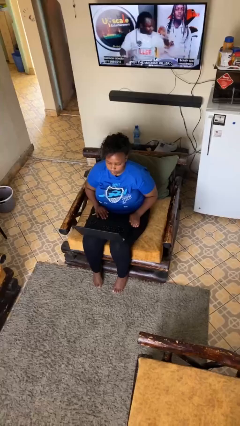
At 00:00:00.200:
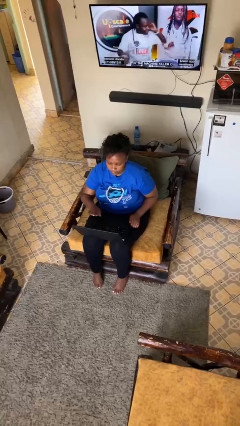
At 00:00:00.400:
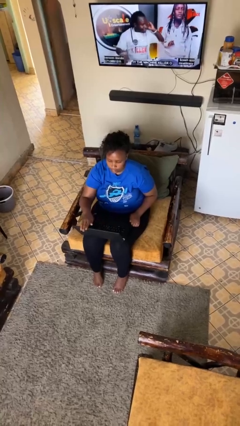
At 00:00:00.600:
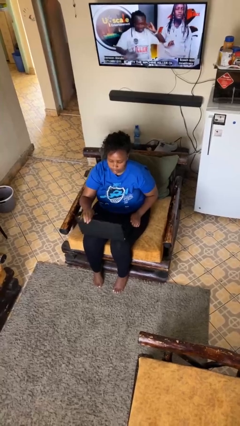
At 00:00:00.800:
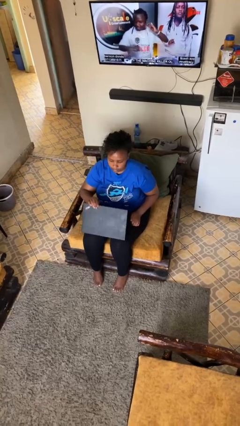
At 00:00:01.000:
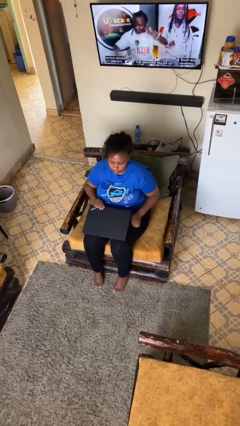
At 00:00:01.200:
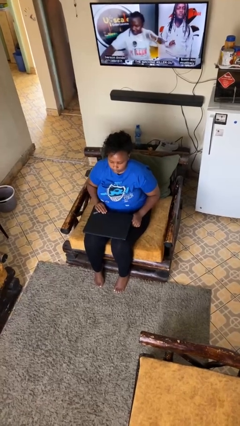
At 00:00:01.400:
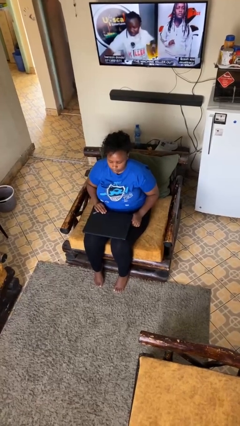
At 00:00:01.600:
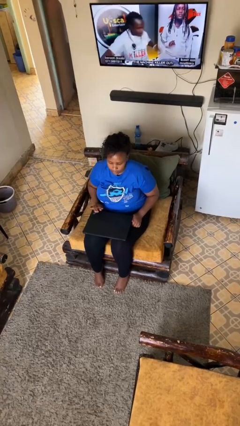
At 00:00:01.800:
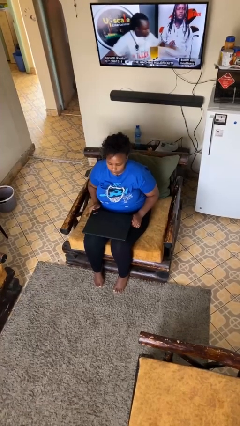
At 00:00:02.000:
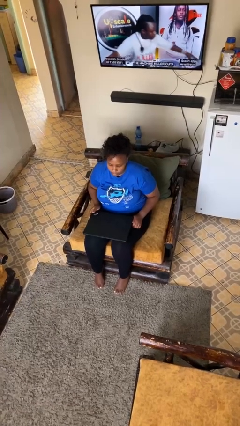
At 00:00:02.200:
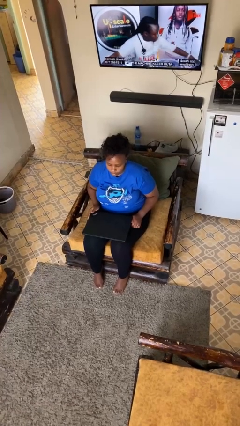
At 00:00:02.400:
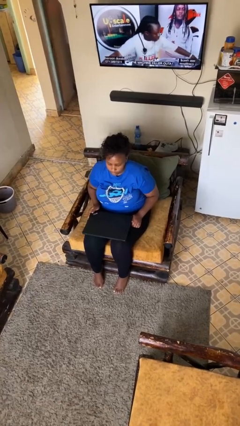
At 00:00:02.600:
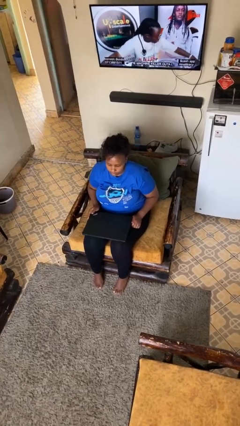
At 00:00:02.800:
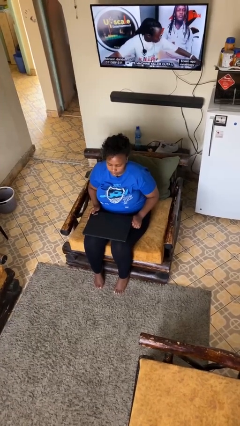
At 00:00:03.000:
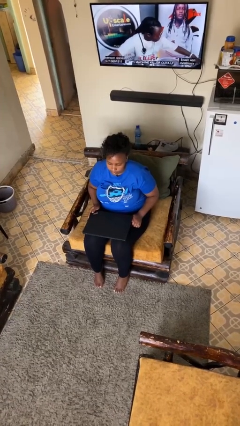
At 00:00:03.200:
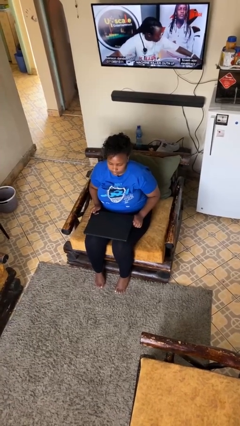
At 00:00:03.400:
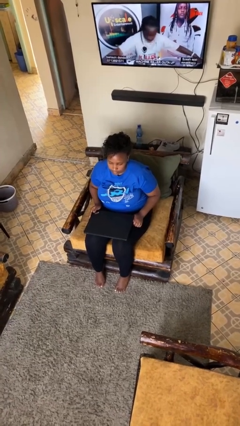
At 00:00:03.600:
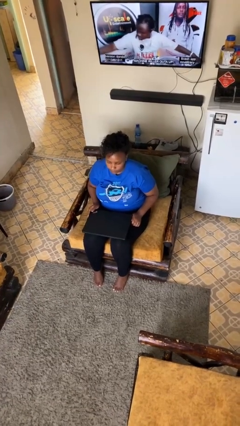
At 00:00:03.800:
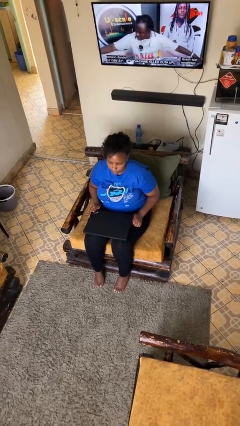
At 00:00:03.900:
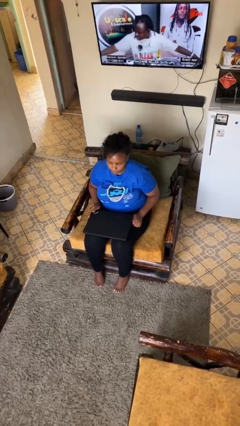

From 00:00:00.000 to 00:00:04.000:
person closes laptop

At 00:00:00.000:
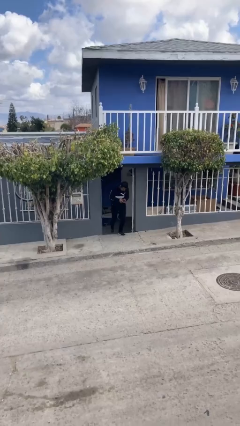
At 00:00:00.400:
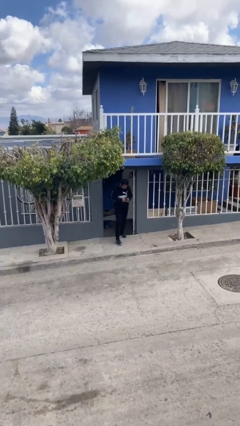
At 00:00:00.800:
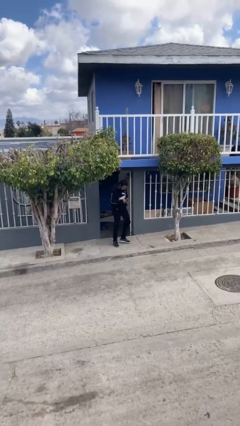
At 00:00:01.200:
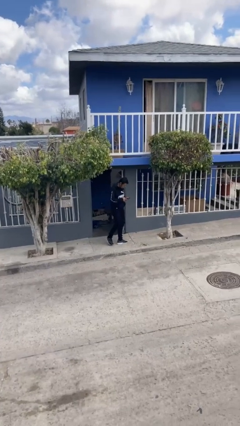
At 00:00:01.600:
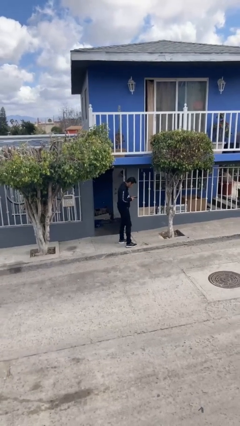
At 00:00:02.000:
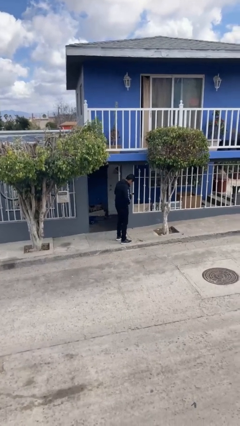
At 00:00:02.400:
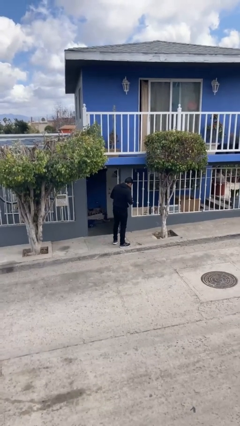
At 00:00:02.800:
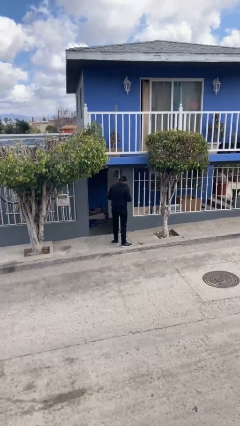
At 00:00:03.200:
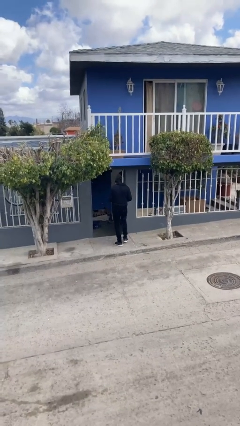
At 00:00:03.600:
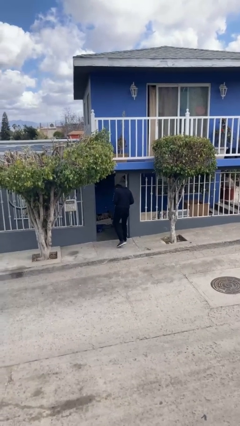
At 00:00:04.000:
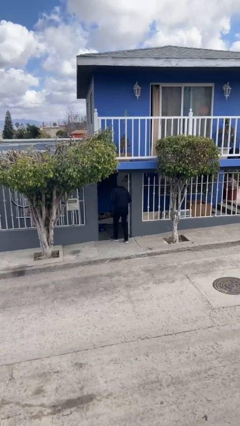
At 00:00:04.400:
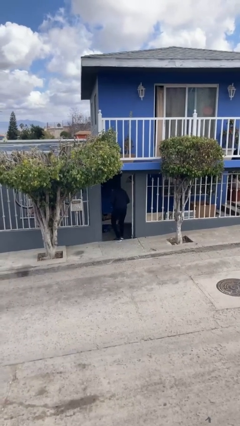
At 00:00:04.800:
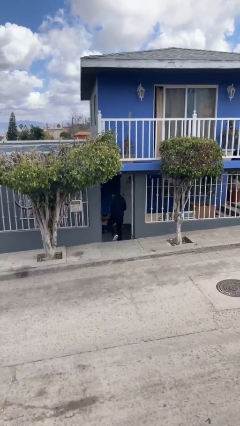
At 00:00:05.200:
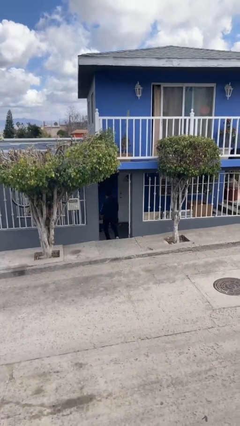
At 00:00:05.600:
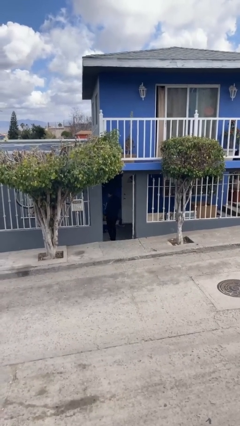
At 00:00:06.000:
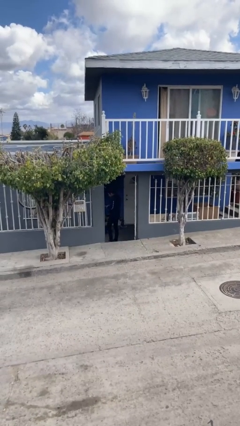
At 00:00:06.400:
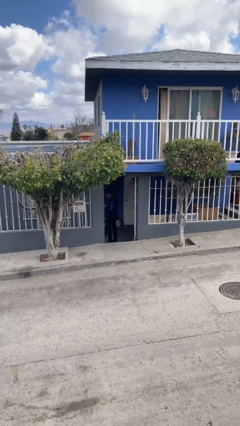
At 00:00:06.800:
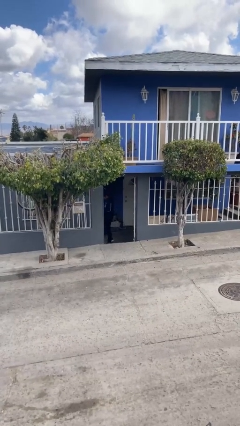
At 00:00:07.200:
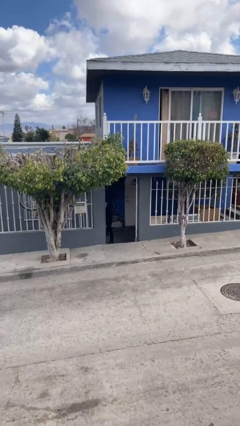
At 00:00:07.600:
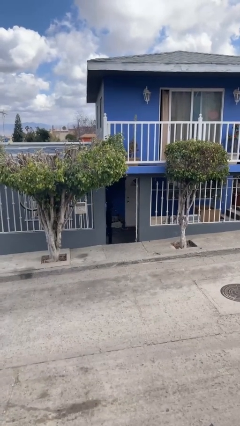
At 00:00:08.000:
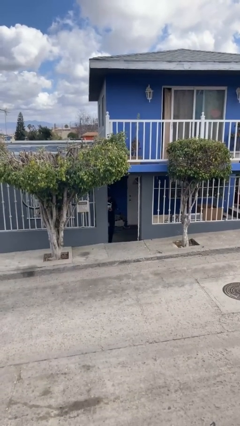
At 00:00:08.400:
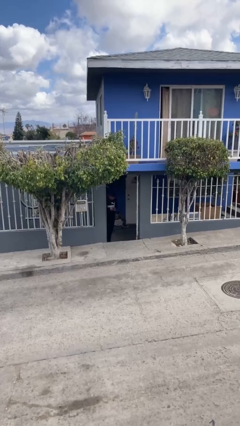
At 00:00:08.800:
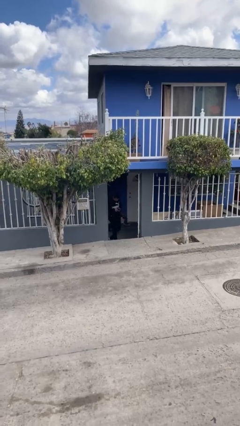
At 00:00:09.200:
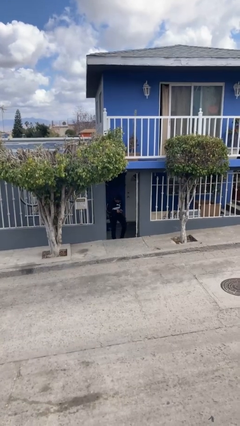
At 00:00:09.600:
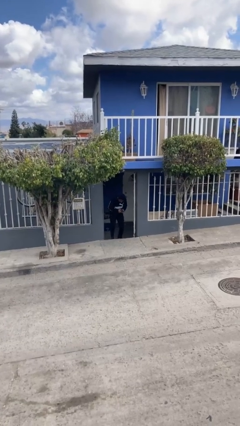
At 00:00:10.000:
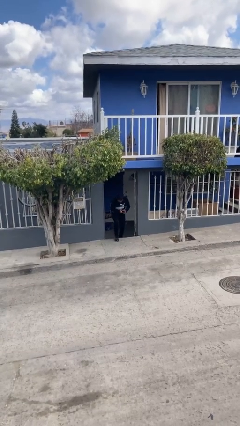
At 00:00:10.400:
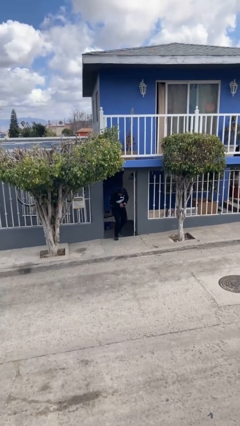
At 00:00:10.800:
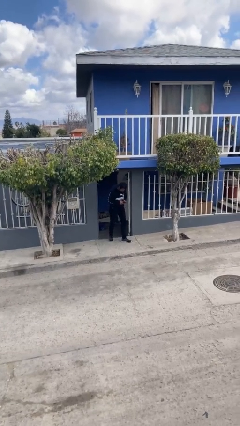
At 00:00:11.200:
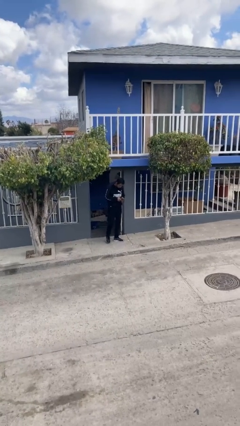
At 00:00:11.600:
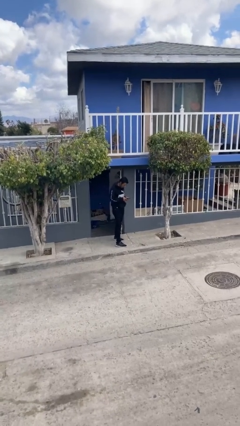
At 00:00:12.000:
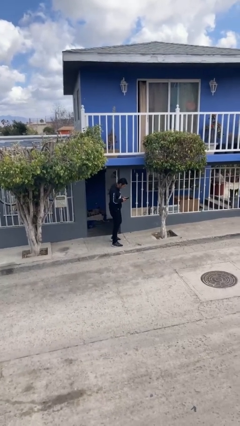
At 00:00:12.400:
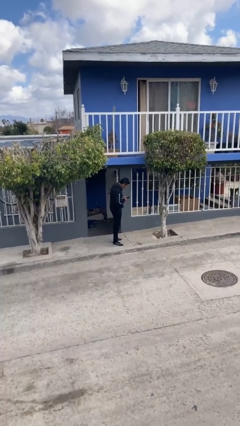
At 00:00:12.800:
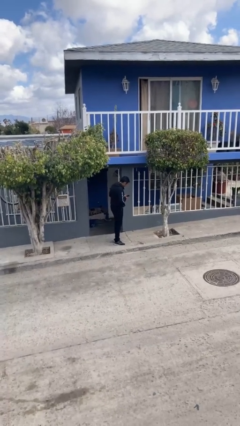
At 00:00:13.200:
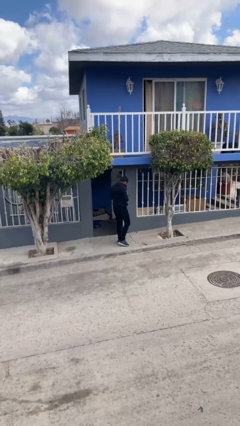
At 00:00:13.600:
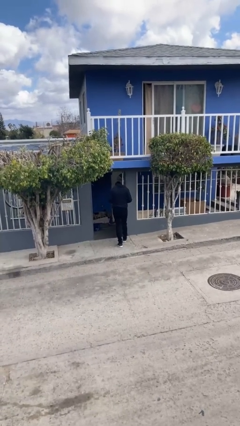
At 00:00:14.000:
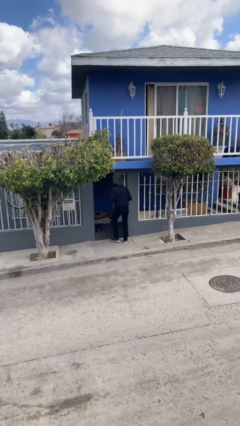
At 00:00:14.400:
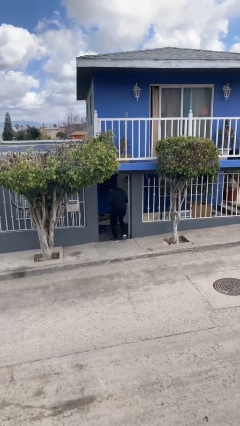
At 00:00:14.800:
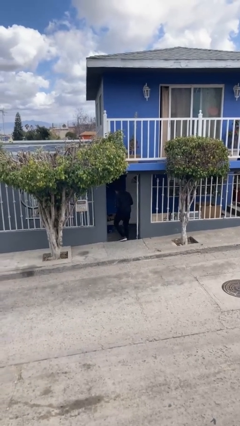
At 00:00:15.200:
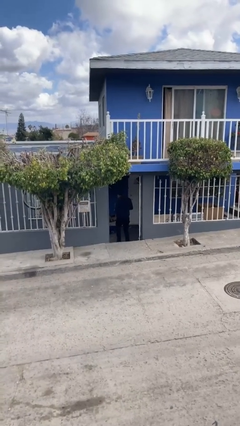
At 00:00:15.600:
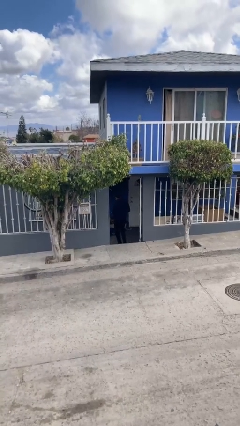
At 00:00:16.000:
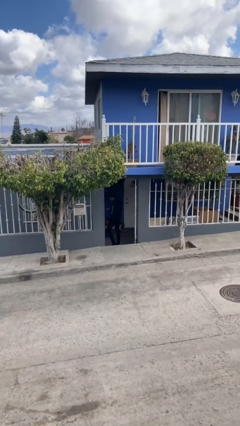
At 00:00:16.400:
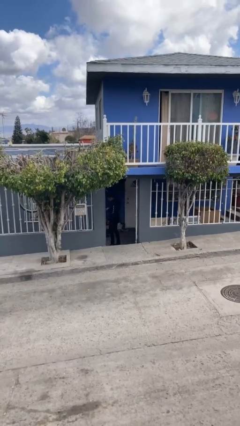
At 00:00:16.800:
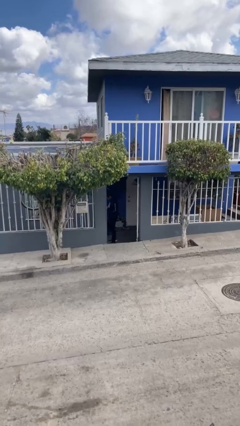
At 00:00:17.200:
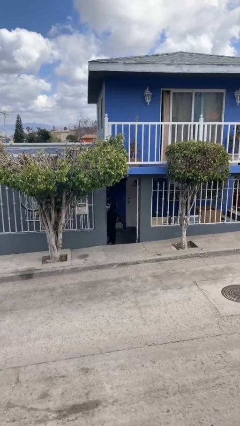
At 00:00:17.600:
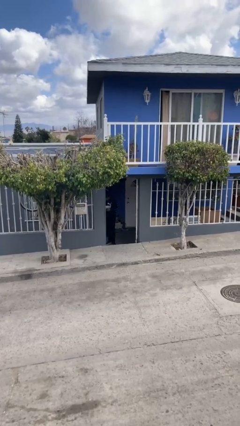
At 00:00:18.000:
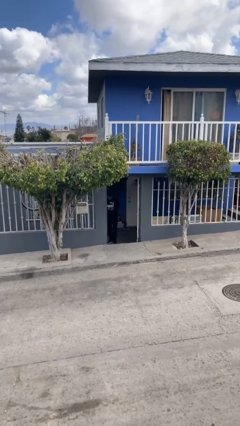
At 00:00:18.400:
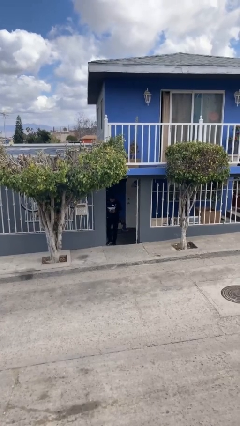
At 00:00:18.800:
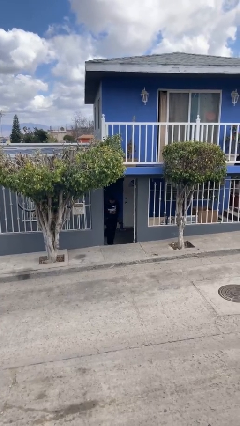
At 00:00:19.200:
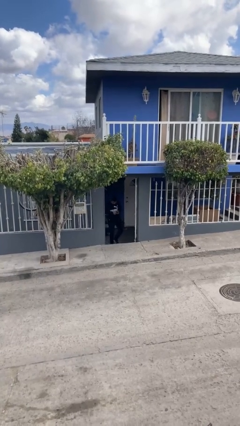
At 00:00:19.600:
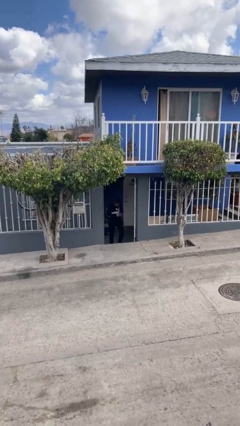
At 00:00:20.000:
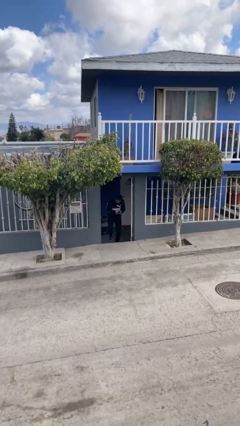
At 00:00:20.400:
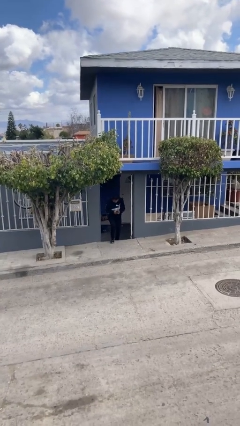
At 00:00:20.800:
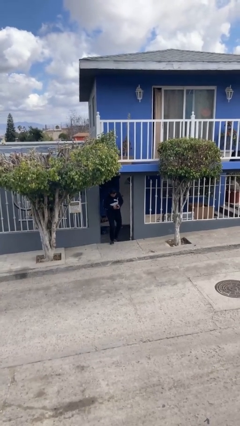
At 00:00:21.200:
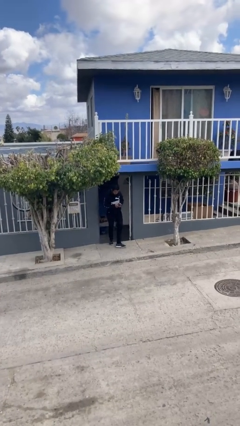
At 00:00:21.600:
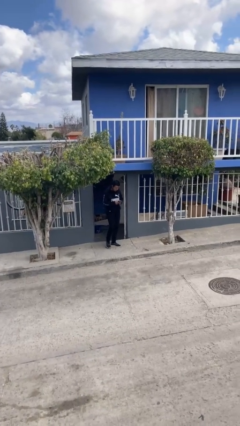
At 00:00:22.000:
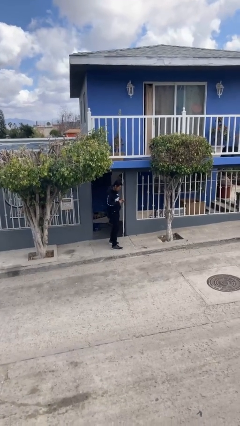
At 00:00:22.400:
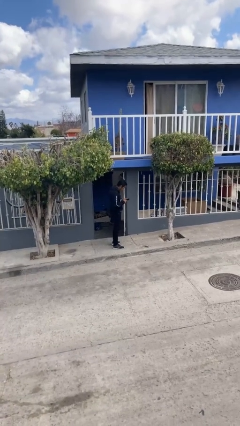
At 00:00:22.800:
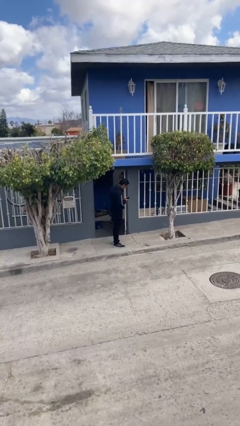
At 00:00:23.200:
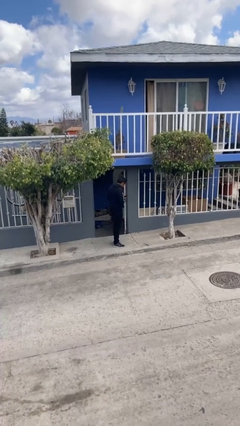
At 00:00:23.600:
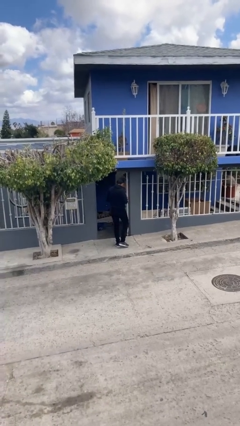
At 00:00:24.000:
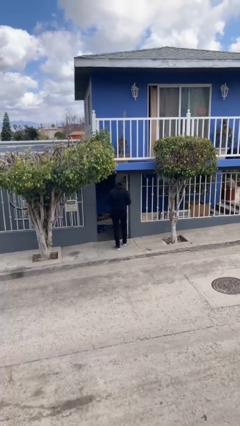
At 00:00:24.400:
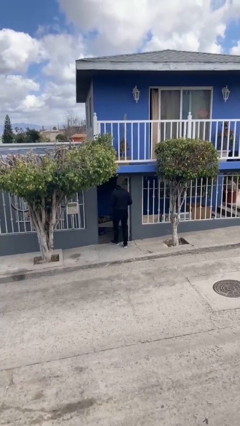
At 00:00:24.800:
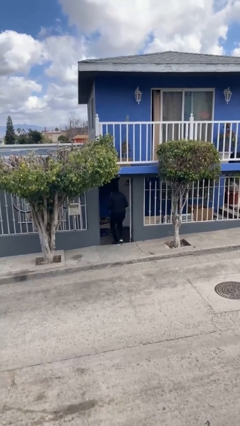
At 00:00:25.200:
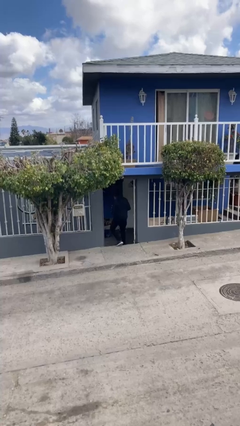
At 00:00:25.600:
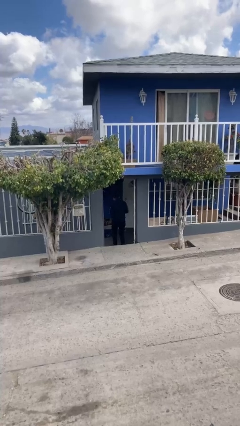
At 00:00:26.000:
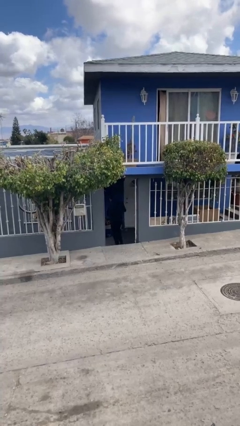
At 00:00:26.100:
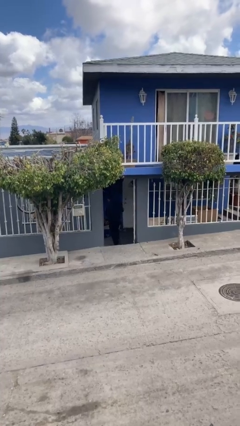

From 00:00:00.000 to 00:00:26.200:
person texts on phone

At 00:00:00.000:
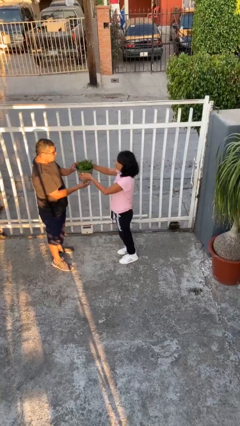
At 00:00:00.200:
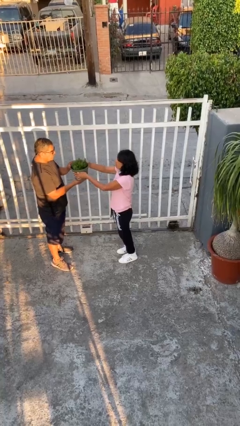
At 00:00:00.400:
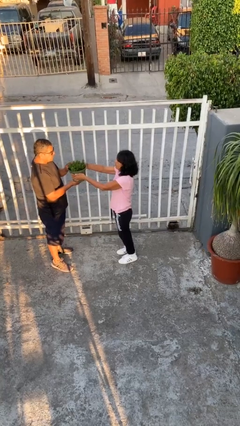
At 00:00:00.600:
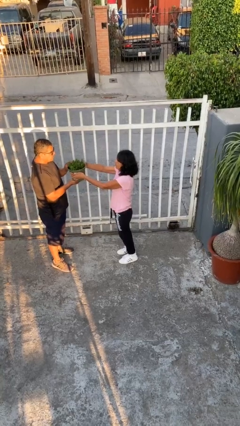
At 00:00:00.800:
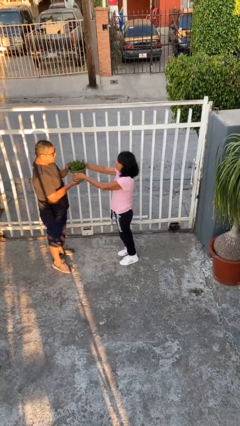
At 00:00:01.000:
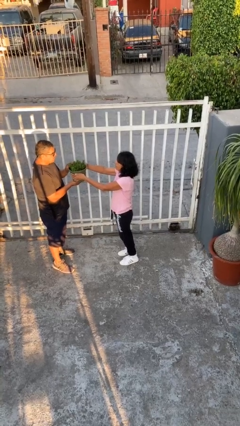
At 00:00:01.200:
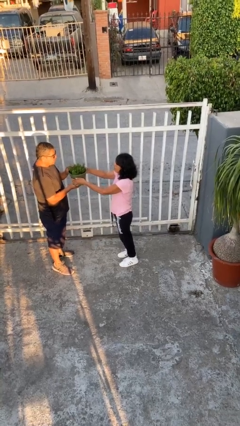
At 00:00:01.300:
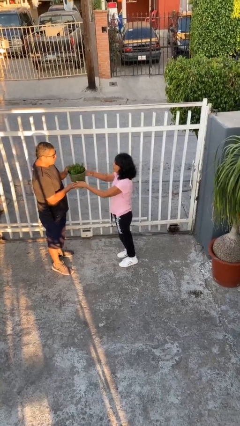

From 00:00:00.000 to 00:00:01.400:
person transfers object to person
